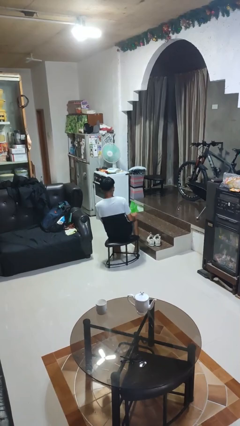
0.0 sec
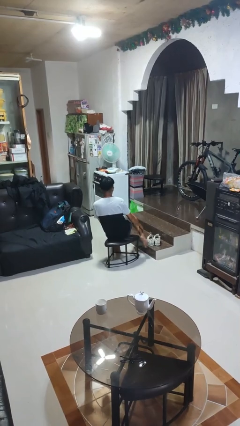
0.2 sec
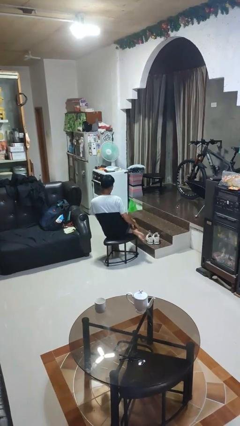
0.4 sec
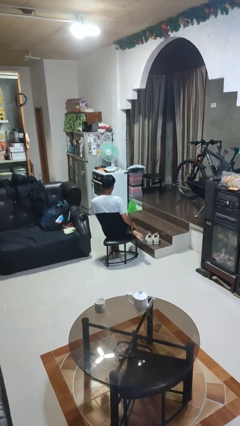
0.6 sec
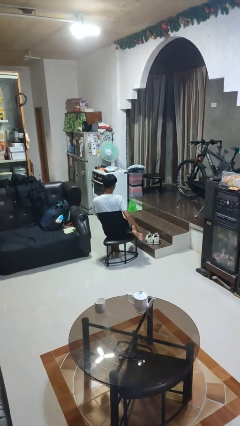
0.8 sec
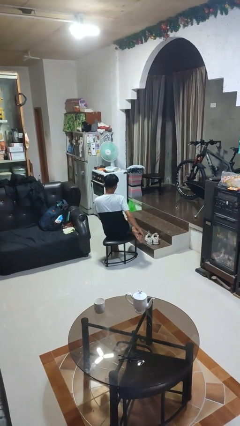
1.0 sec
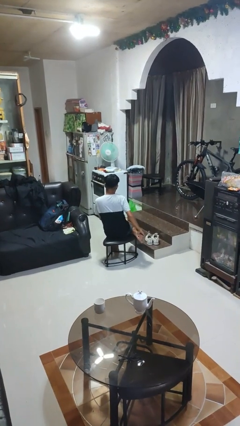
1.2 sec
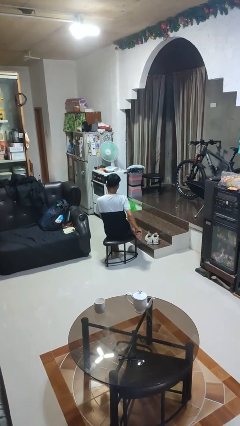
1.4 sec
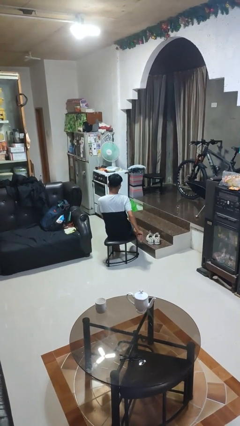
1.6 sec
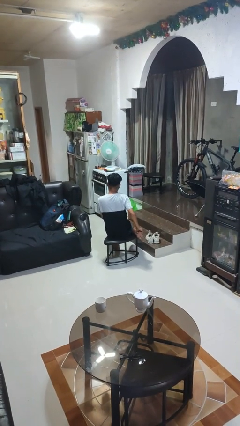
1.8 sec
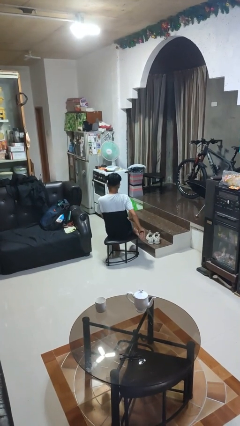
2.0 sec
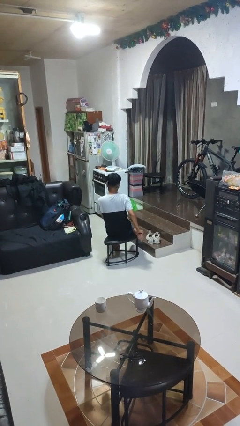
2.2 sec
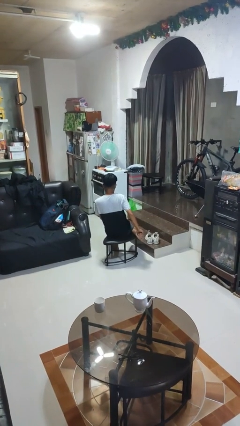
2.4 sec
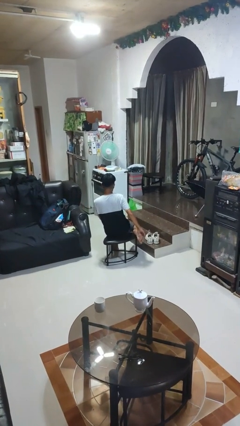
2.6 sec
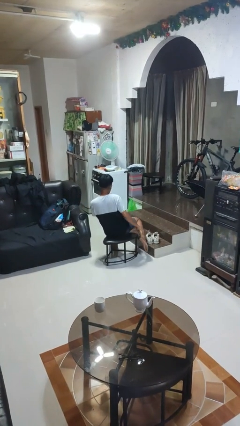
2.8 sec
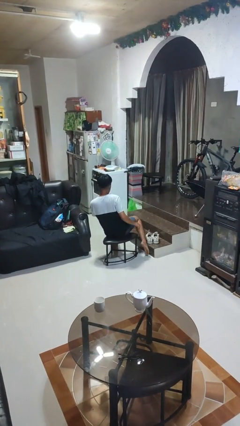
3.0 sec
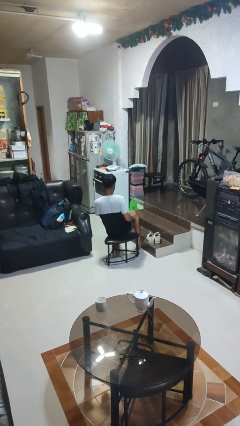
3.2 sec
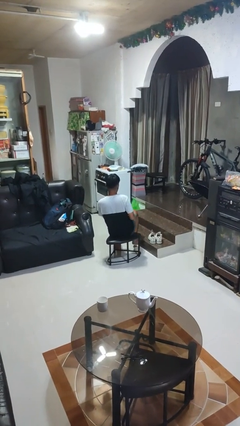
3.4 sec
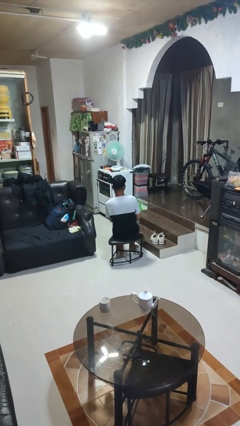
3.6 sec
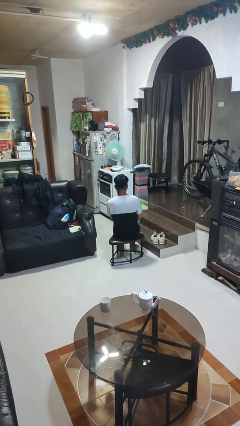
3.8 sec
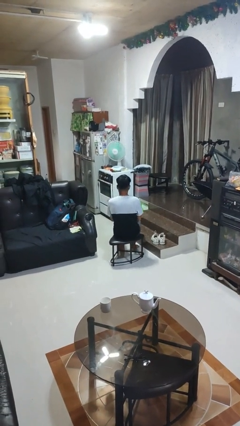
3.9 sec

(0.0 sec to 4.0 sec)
person rubs foot

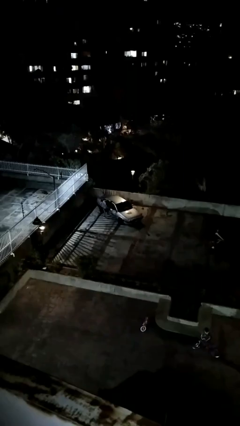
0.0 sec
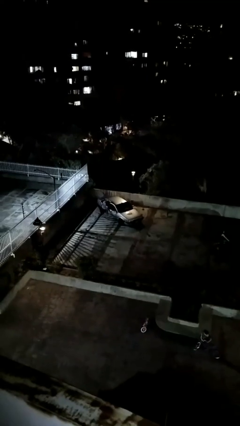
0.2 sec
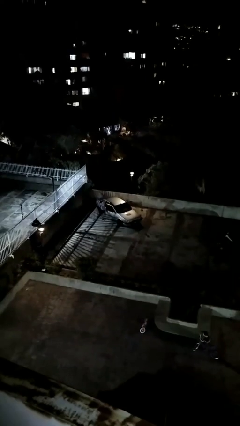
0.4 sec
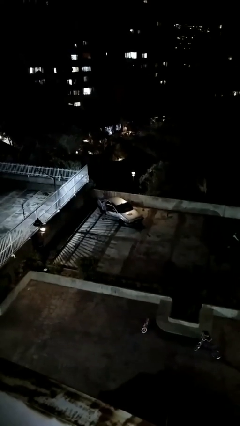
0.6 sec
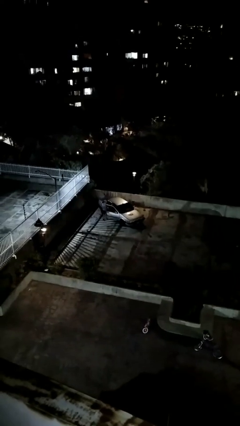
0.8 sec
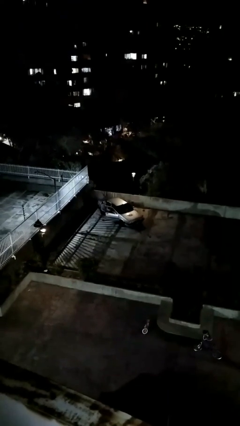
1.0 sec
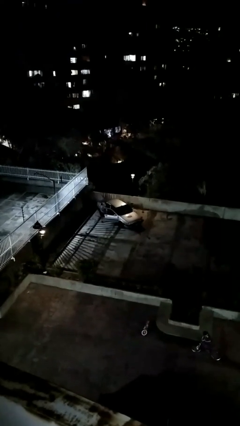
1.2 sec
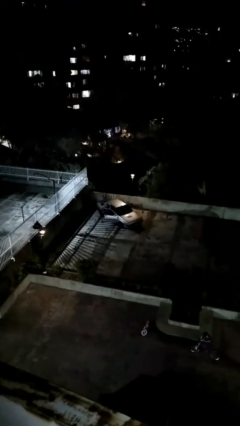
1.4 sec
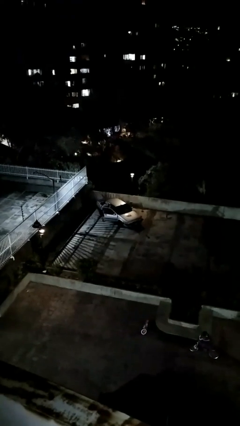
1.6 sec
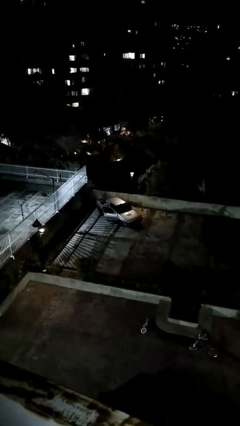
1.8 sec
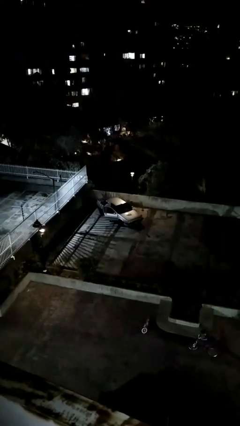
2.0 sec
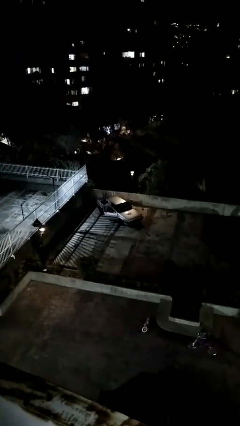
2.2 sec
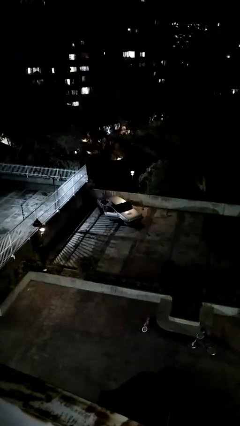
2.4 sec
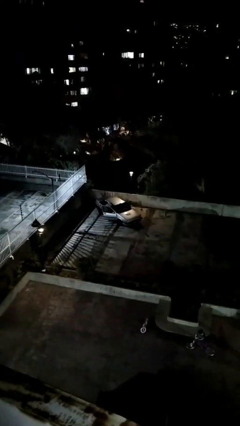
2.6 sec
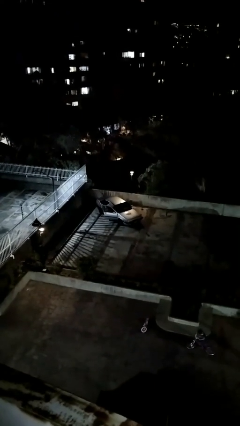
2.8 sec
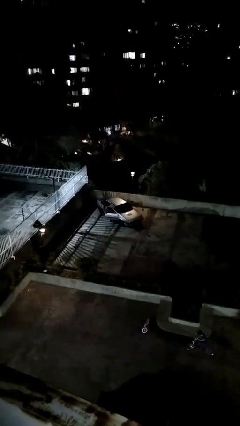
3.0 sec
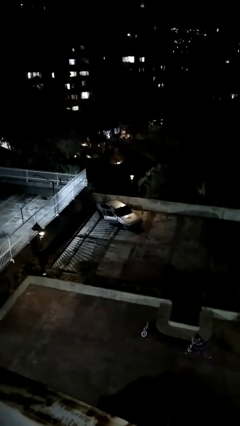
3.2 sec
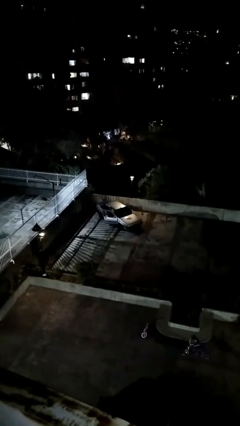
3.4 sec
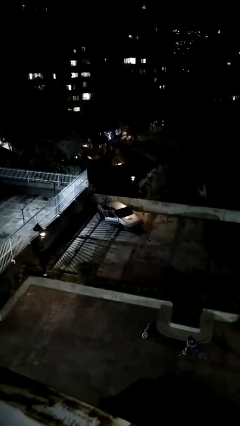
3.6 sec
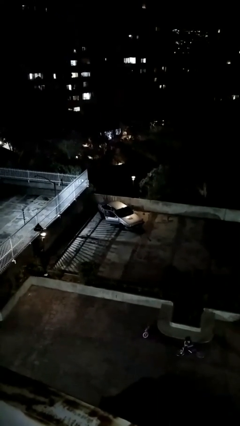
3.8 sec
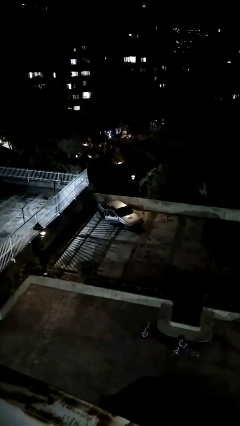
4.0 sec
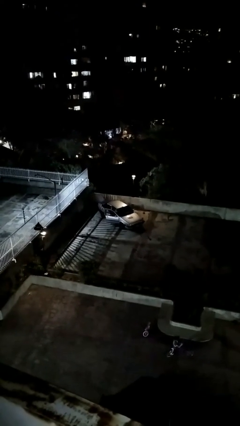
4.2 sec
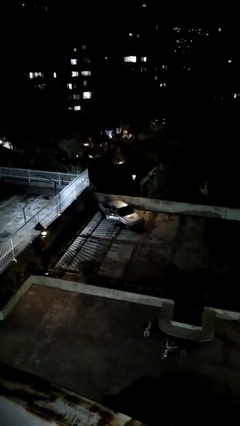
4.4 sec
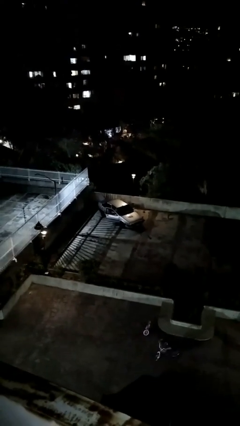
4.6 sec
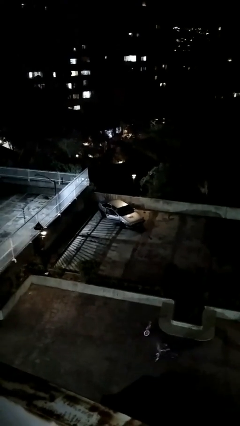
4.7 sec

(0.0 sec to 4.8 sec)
car picks up person

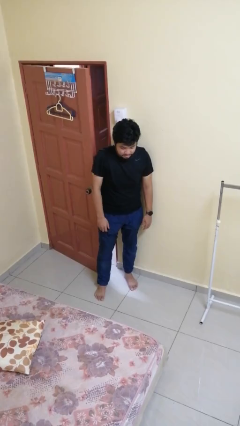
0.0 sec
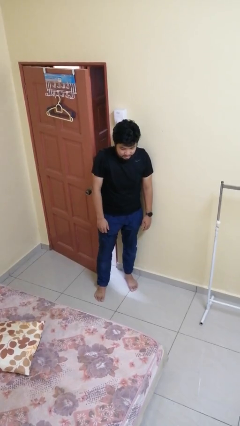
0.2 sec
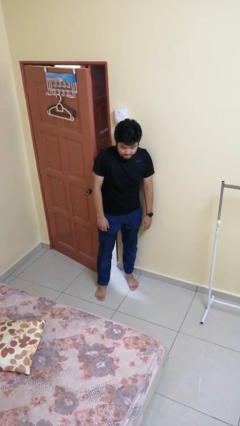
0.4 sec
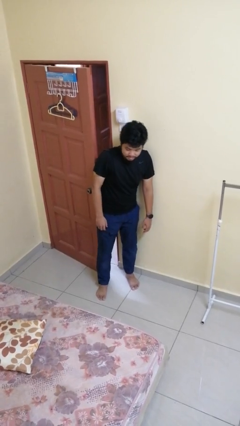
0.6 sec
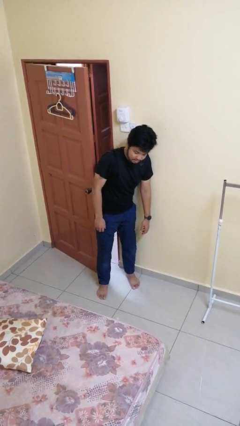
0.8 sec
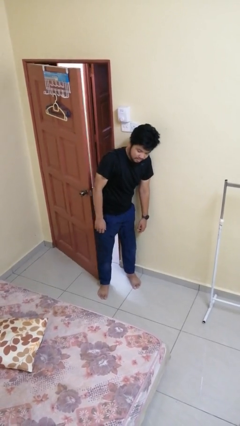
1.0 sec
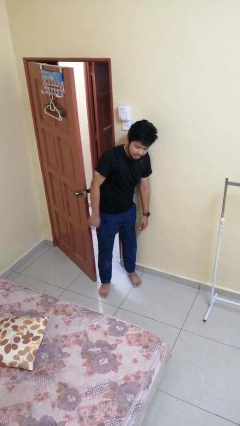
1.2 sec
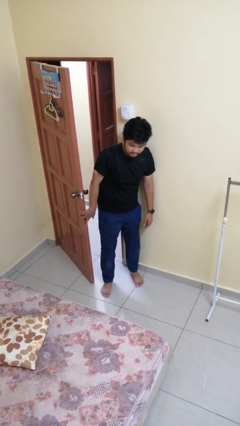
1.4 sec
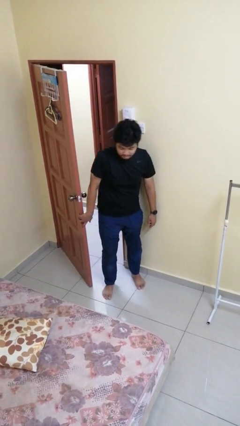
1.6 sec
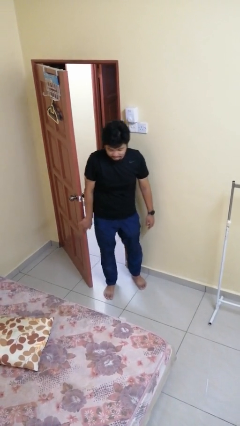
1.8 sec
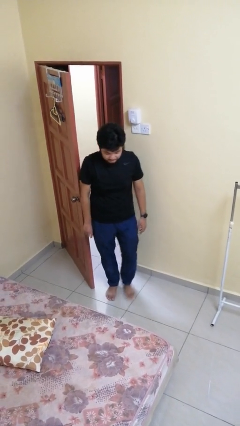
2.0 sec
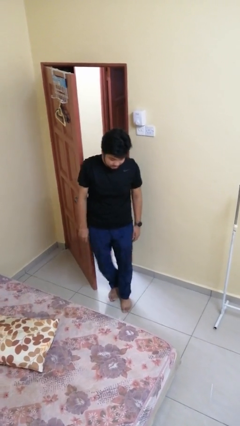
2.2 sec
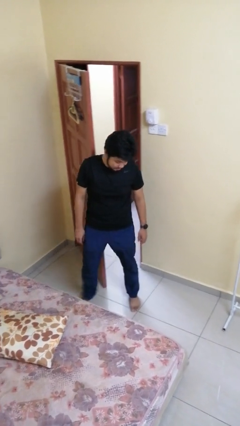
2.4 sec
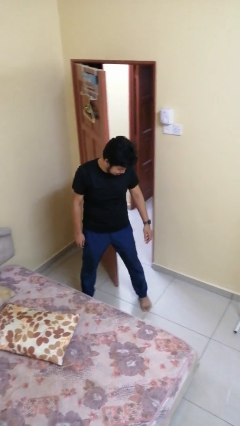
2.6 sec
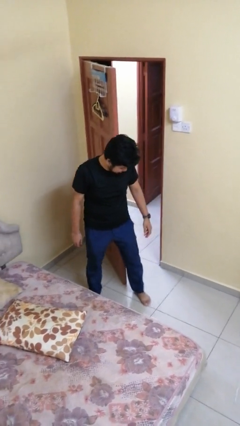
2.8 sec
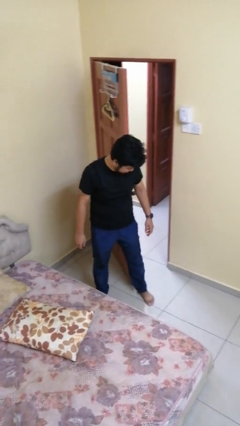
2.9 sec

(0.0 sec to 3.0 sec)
person opens facility door

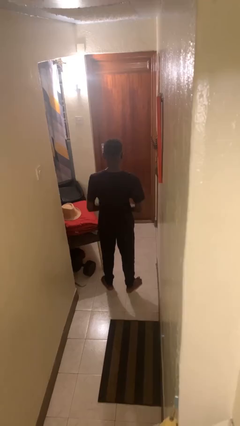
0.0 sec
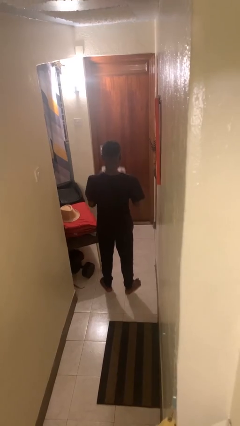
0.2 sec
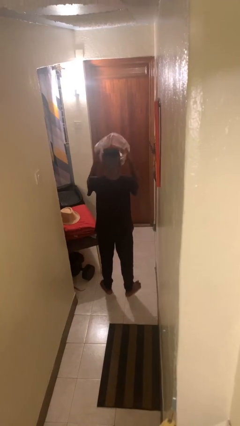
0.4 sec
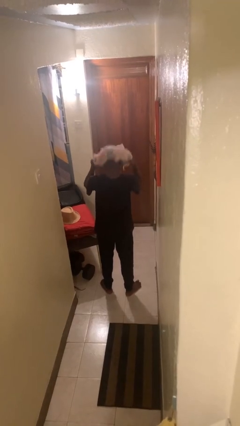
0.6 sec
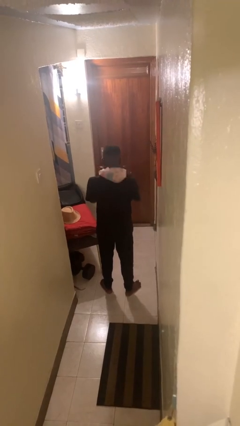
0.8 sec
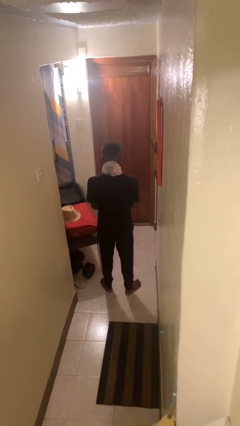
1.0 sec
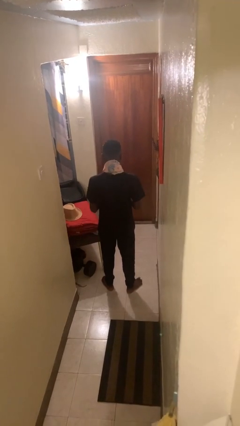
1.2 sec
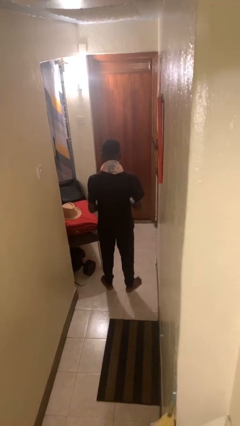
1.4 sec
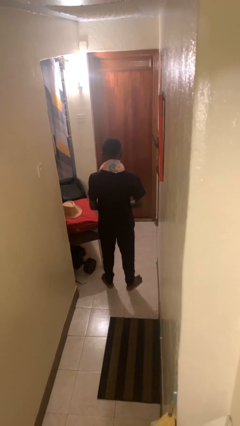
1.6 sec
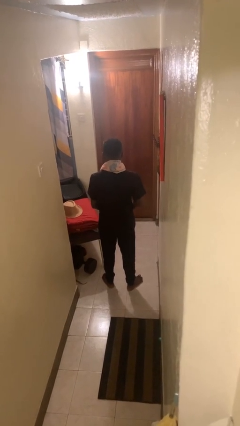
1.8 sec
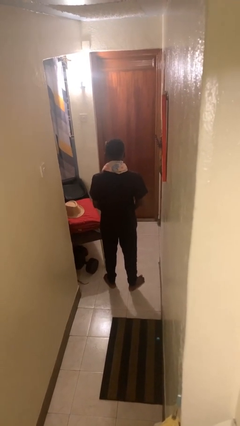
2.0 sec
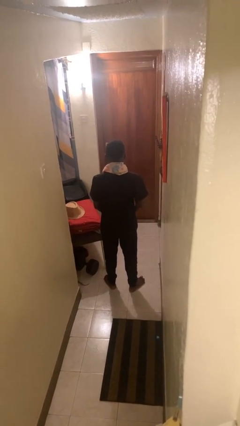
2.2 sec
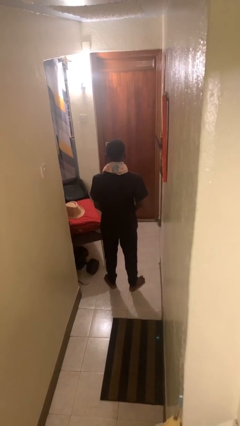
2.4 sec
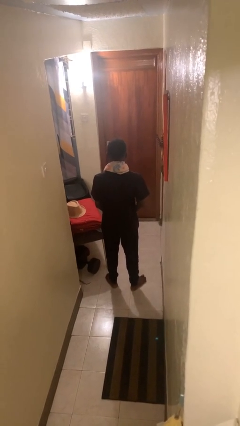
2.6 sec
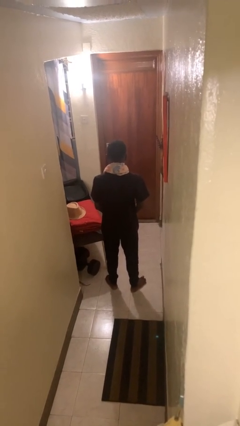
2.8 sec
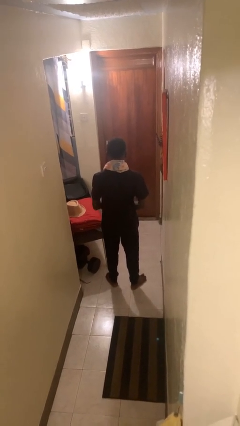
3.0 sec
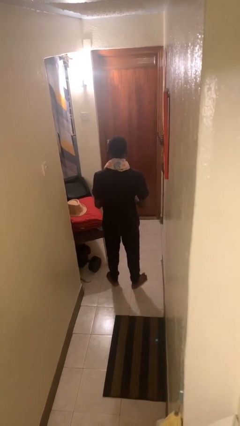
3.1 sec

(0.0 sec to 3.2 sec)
person puts on scarf

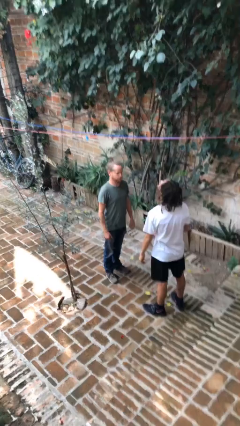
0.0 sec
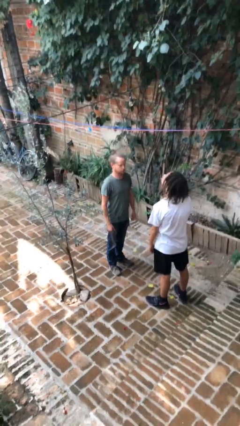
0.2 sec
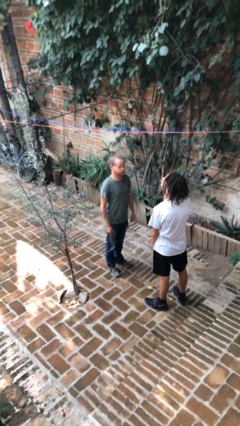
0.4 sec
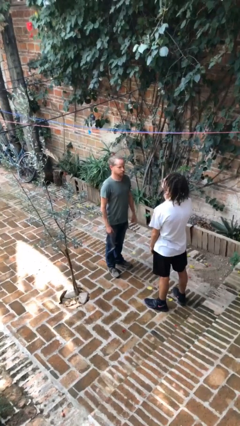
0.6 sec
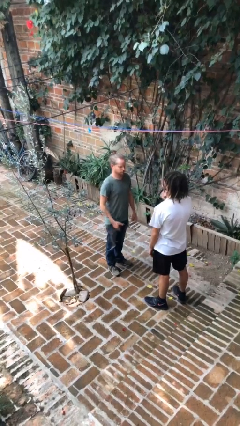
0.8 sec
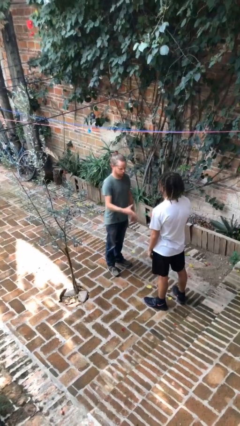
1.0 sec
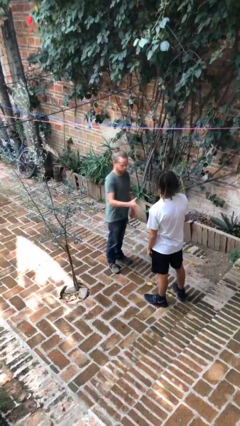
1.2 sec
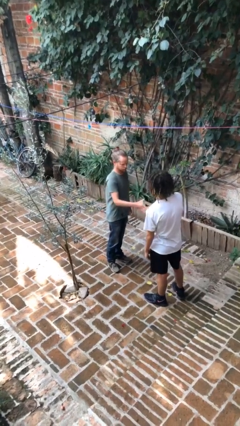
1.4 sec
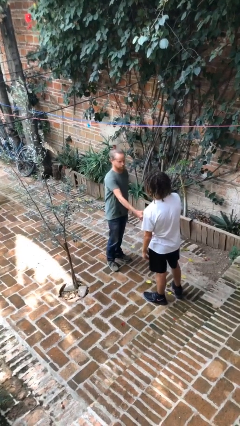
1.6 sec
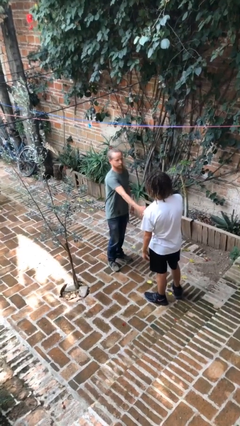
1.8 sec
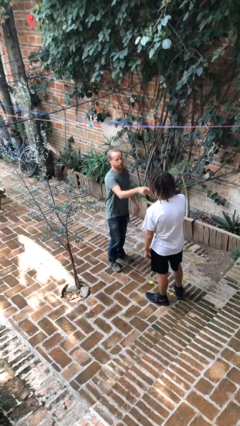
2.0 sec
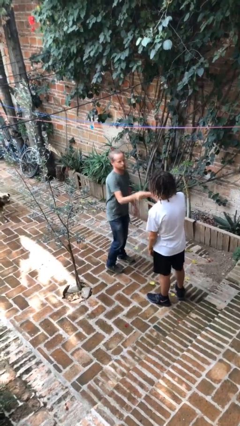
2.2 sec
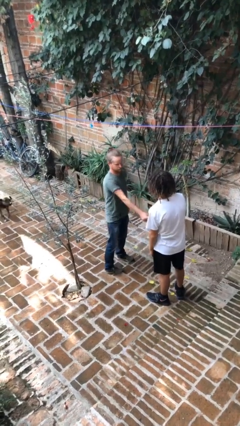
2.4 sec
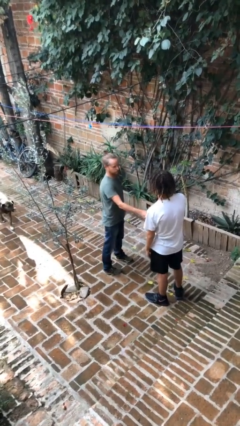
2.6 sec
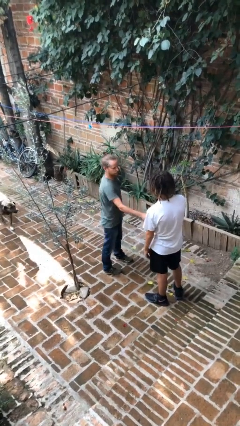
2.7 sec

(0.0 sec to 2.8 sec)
person shakes hand

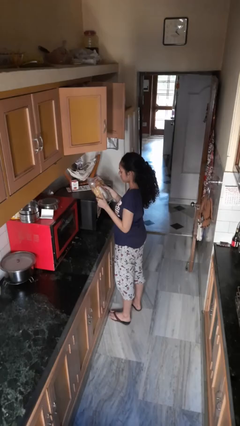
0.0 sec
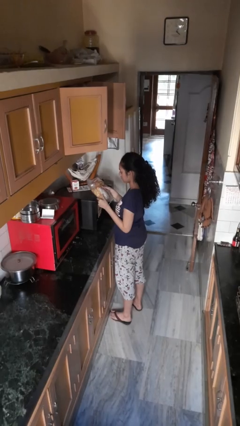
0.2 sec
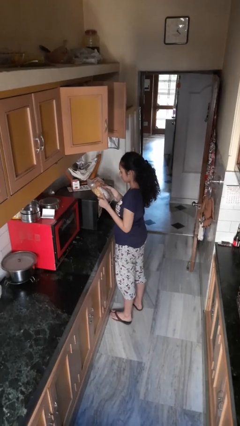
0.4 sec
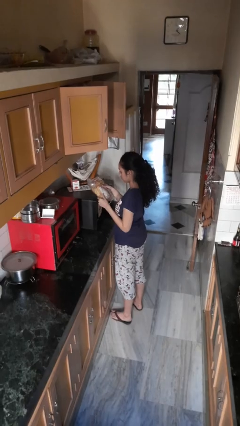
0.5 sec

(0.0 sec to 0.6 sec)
person takes object from cabinet
